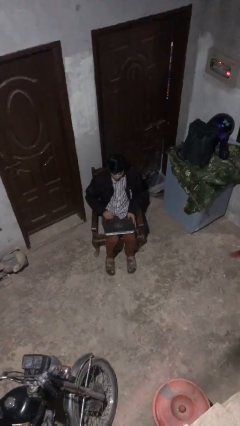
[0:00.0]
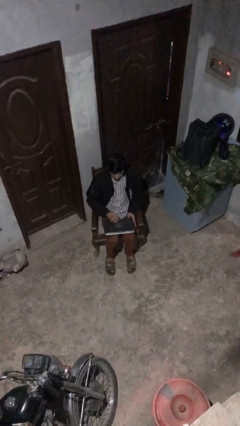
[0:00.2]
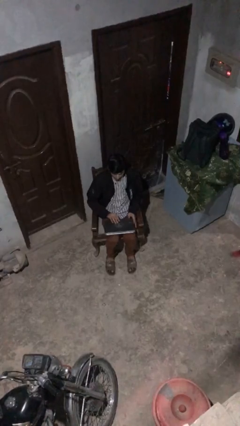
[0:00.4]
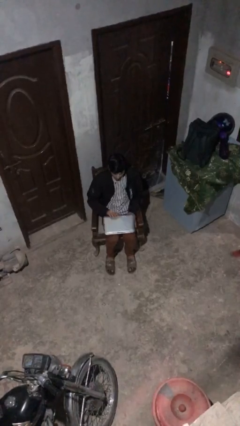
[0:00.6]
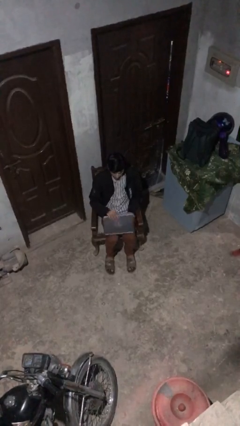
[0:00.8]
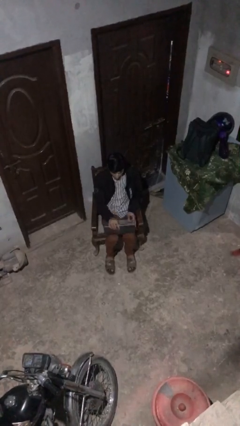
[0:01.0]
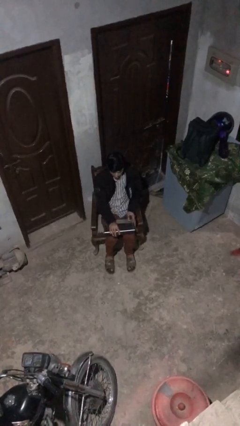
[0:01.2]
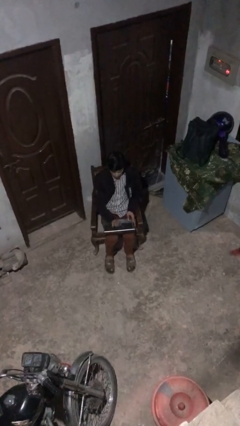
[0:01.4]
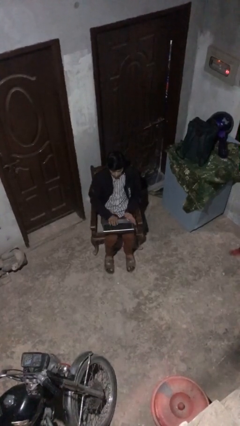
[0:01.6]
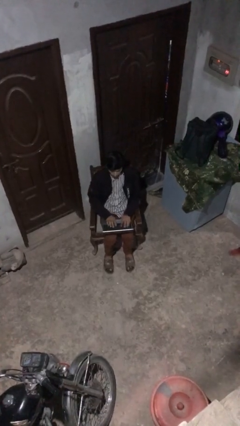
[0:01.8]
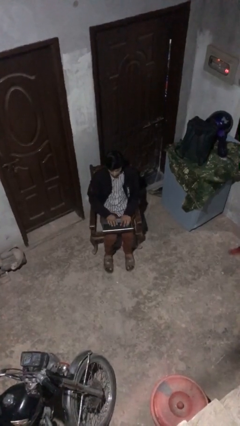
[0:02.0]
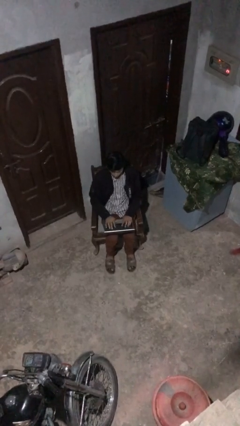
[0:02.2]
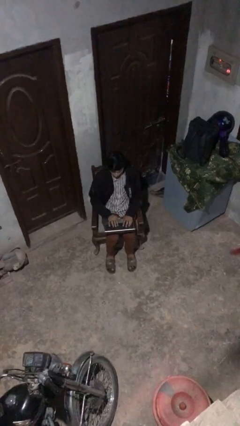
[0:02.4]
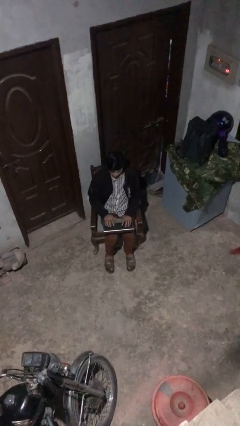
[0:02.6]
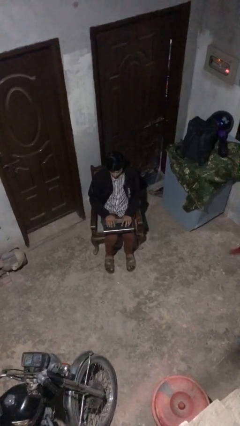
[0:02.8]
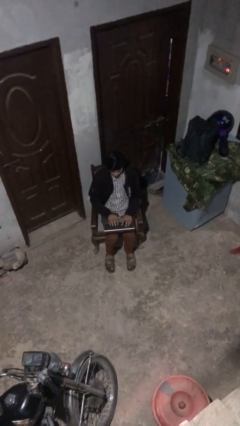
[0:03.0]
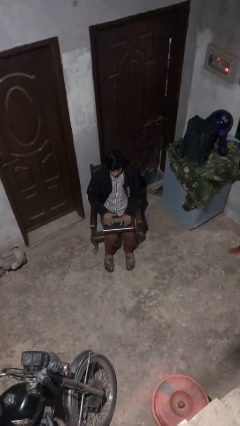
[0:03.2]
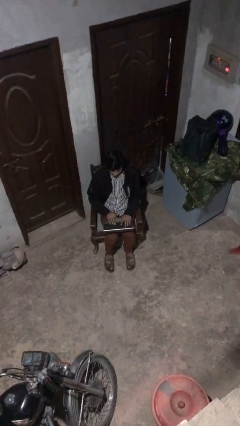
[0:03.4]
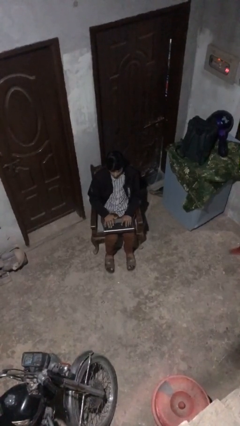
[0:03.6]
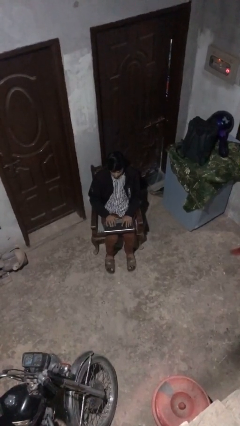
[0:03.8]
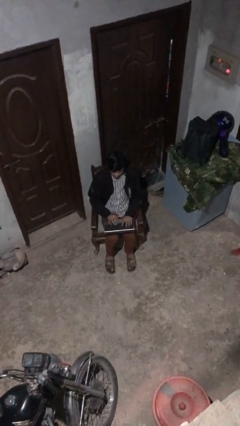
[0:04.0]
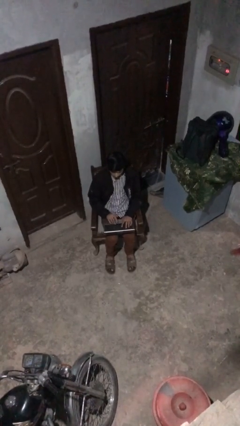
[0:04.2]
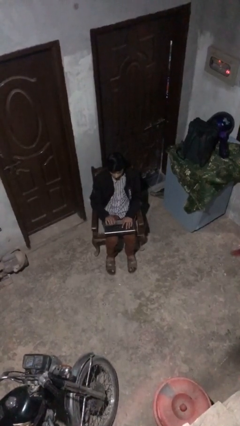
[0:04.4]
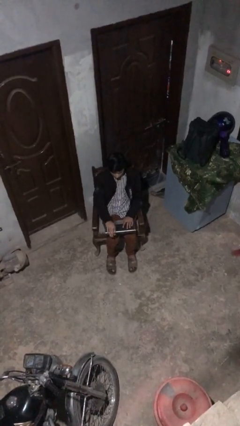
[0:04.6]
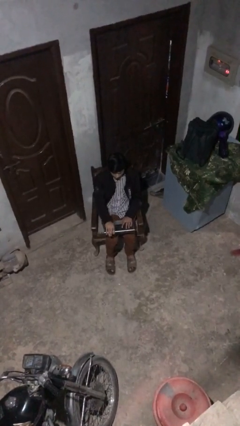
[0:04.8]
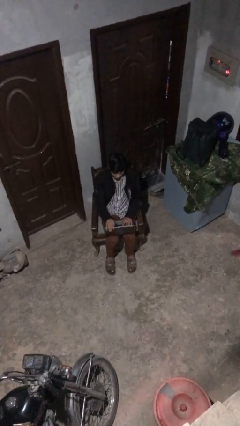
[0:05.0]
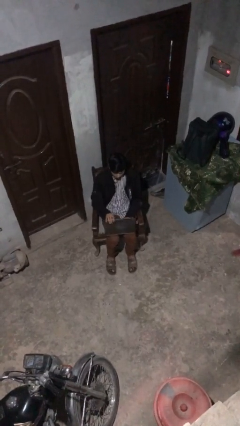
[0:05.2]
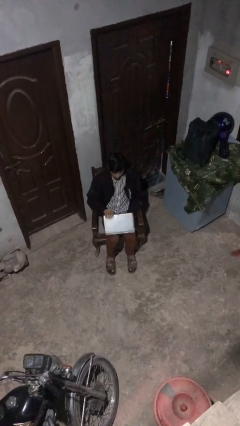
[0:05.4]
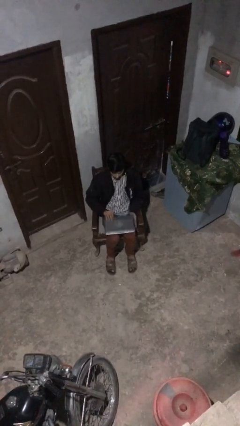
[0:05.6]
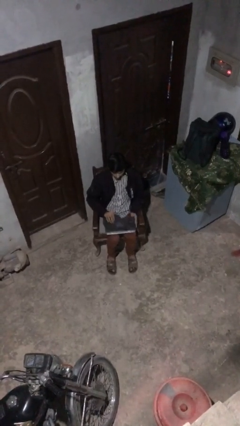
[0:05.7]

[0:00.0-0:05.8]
person interacts with laptop

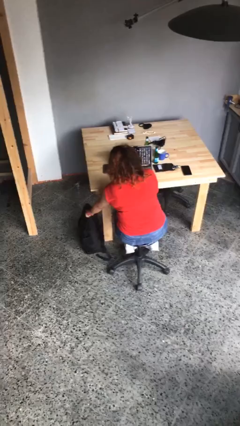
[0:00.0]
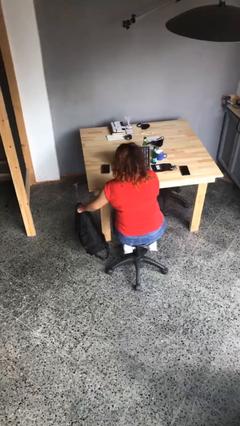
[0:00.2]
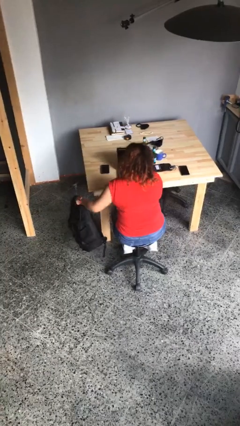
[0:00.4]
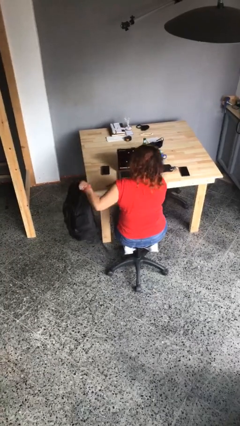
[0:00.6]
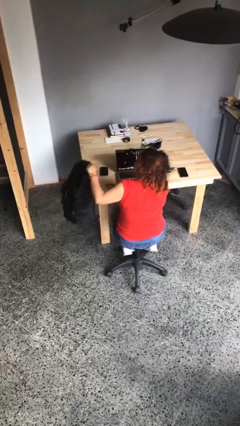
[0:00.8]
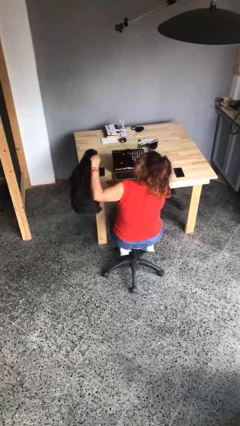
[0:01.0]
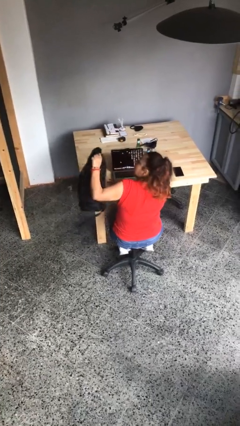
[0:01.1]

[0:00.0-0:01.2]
person picks up object from floor

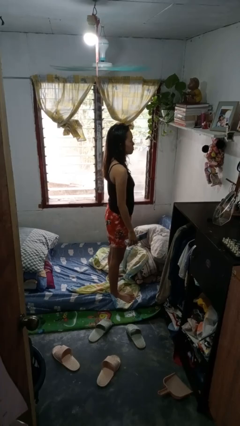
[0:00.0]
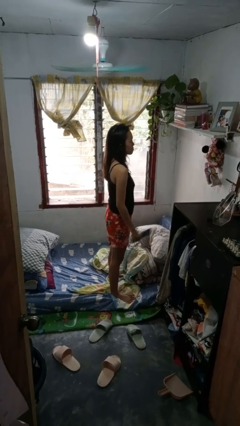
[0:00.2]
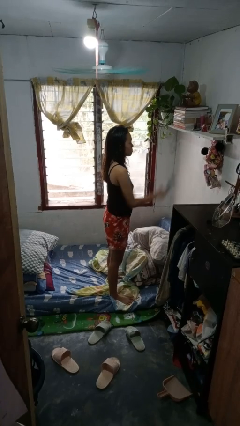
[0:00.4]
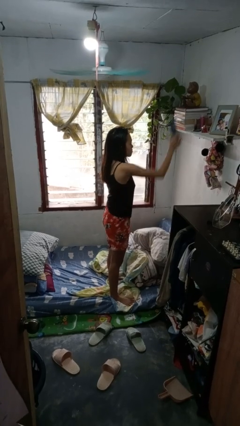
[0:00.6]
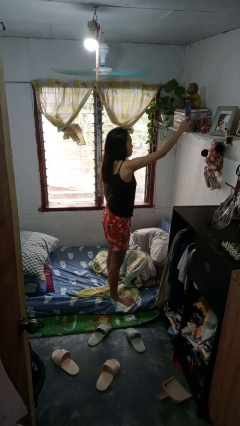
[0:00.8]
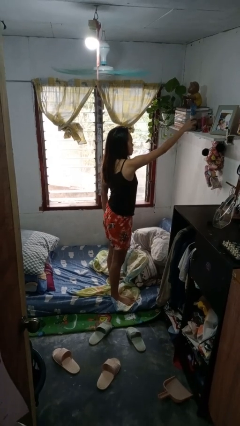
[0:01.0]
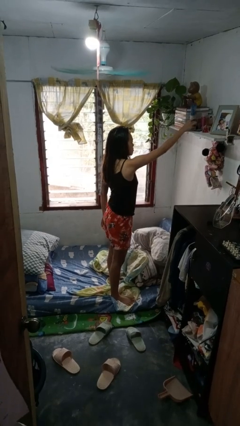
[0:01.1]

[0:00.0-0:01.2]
person puts down object on shelf

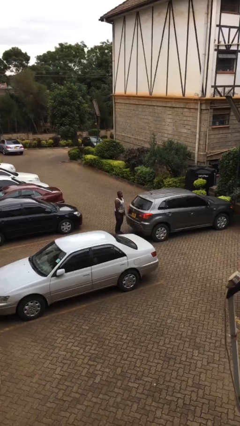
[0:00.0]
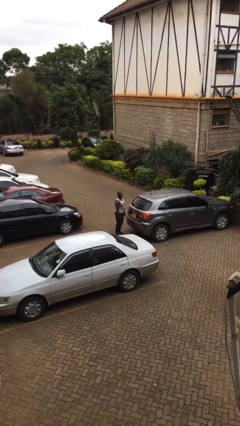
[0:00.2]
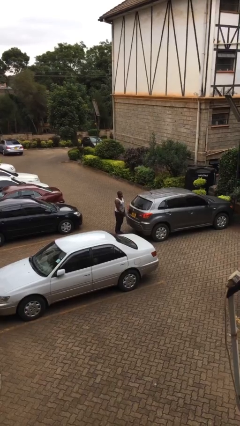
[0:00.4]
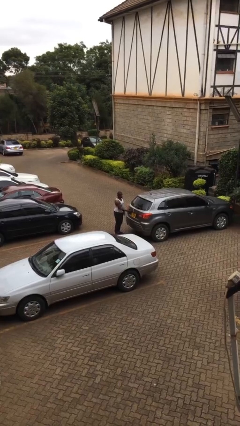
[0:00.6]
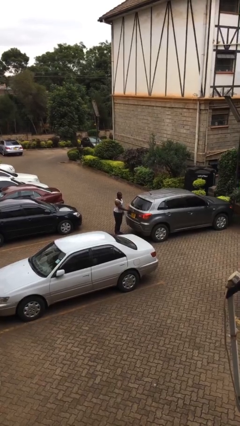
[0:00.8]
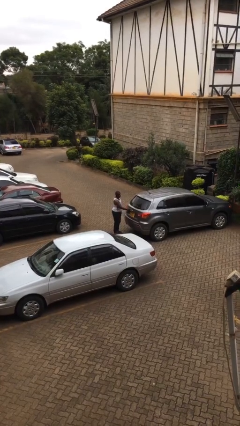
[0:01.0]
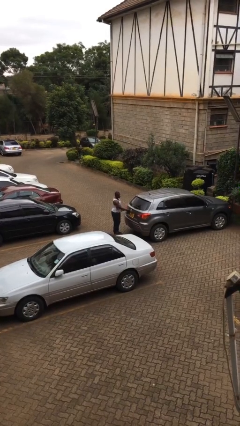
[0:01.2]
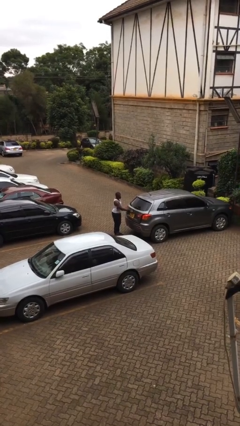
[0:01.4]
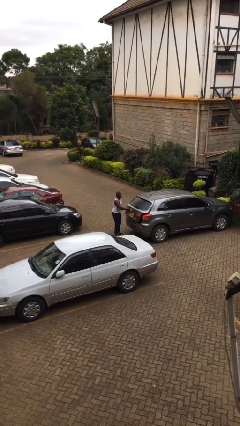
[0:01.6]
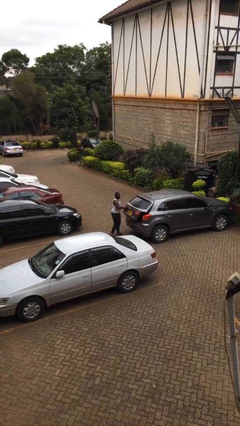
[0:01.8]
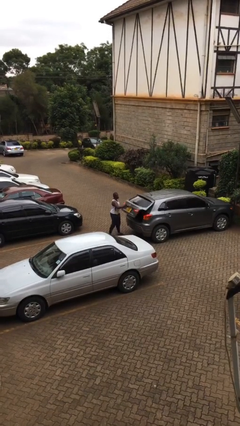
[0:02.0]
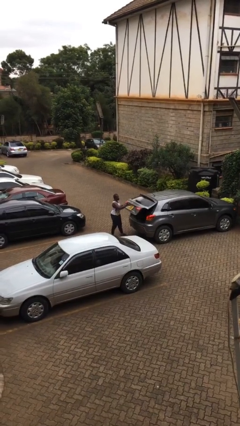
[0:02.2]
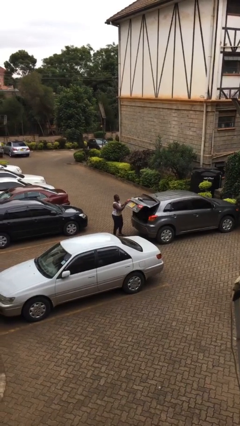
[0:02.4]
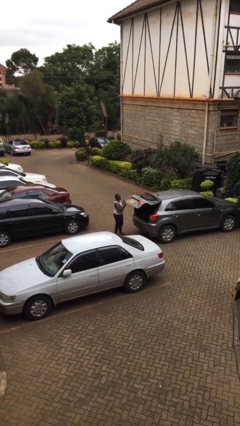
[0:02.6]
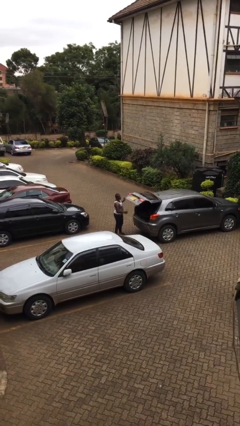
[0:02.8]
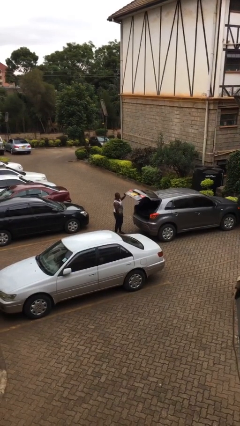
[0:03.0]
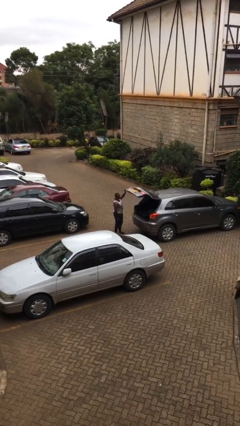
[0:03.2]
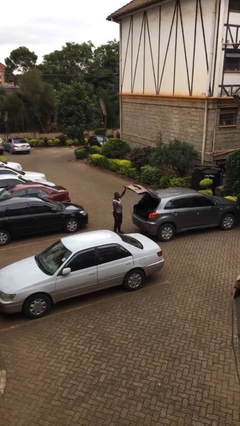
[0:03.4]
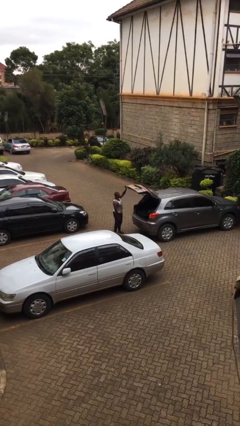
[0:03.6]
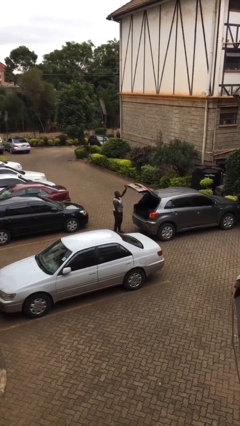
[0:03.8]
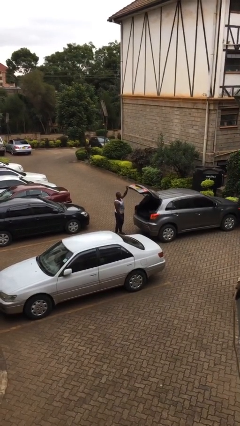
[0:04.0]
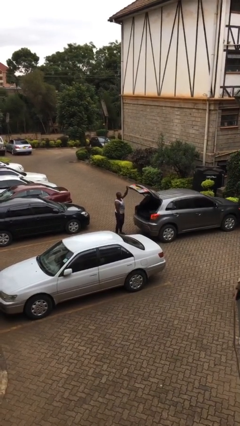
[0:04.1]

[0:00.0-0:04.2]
person opens car trunk

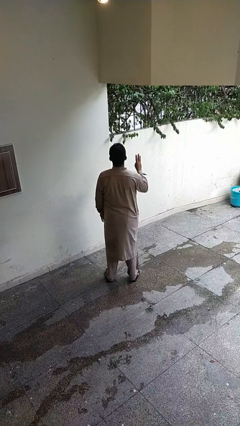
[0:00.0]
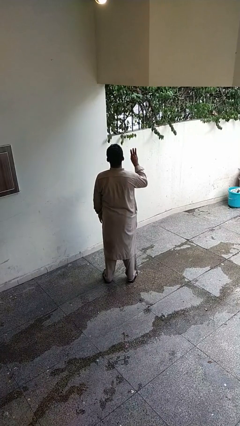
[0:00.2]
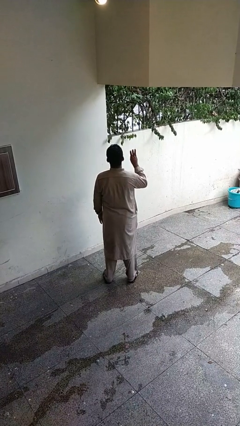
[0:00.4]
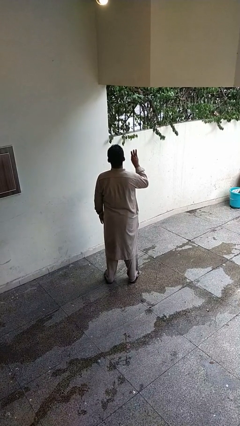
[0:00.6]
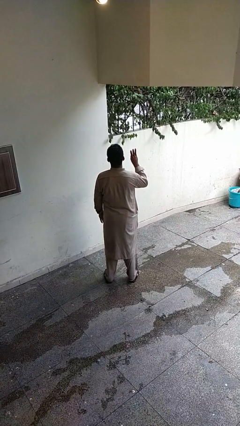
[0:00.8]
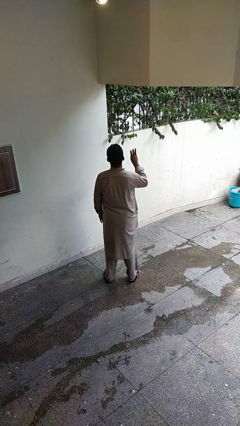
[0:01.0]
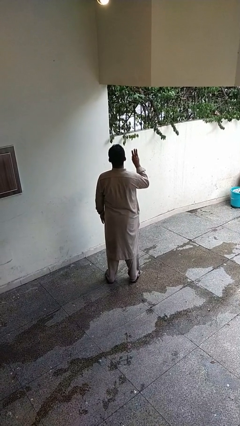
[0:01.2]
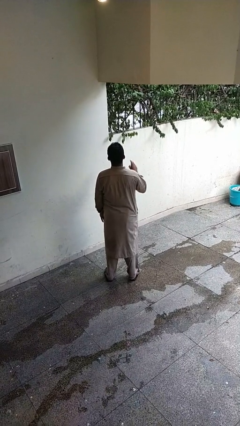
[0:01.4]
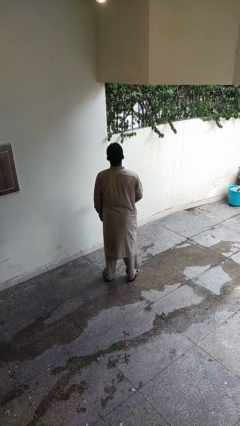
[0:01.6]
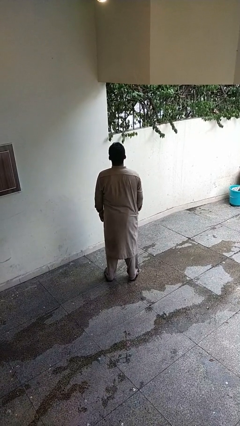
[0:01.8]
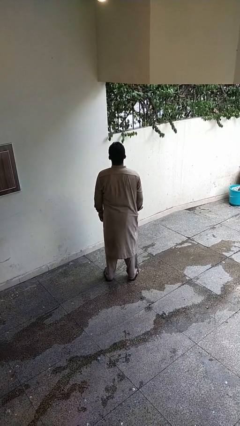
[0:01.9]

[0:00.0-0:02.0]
person gestures number three

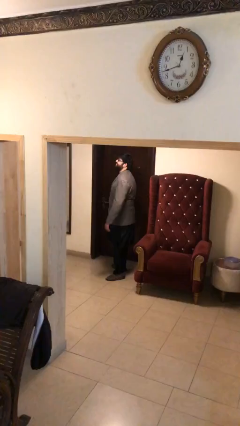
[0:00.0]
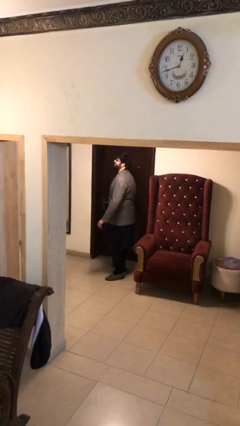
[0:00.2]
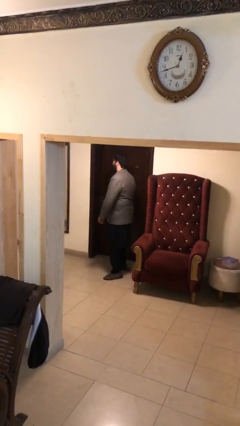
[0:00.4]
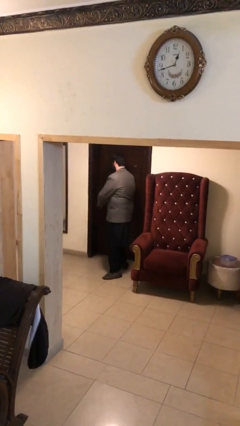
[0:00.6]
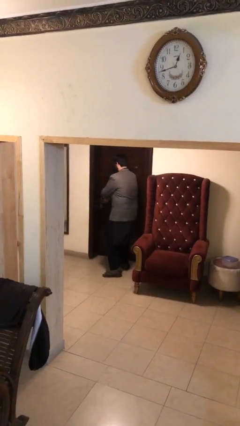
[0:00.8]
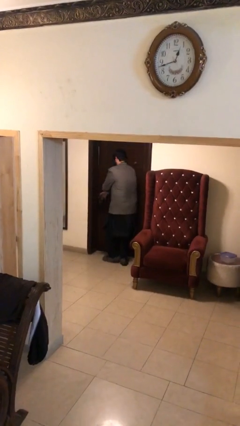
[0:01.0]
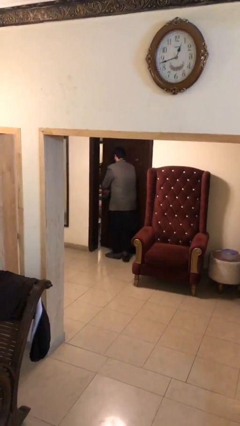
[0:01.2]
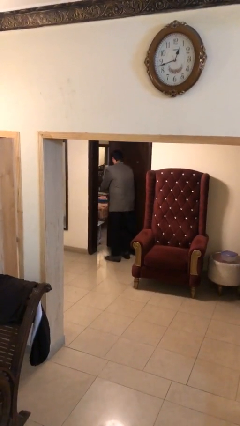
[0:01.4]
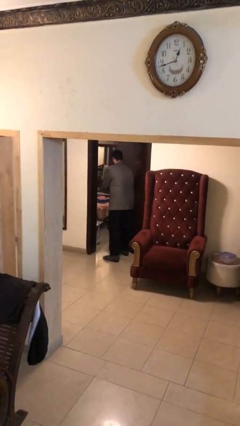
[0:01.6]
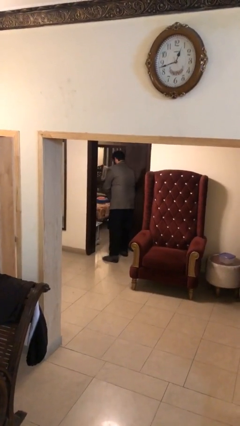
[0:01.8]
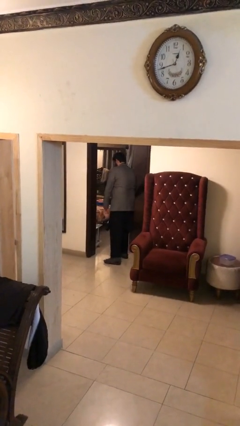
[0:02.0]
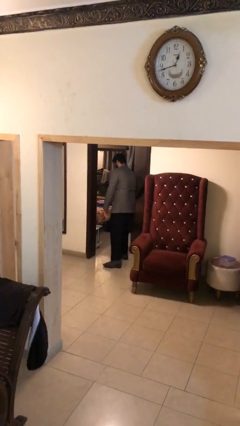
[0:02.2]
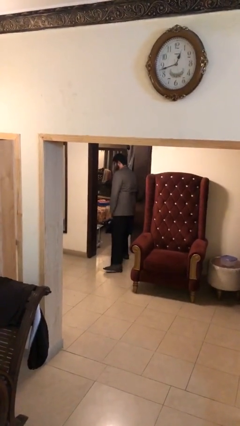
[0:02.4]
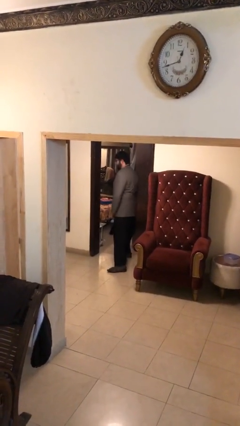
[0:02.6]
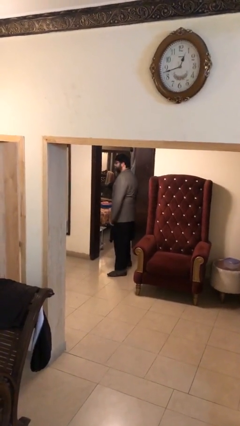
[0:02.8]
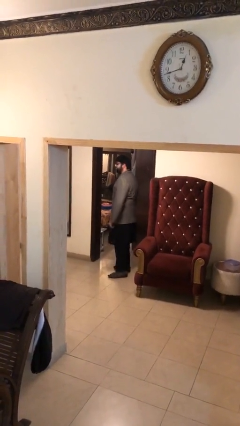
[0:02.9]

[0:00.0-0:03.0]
person opens facility door
